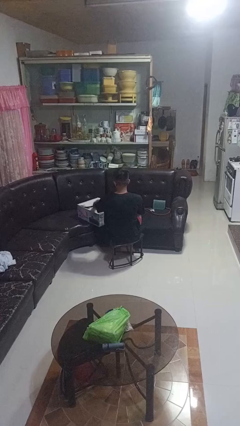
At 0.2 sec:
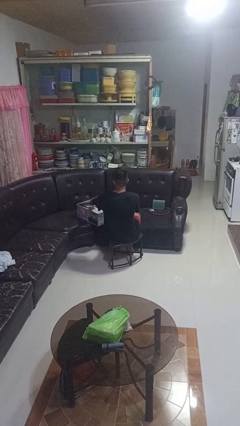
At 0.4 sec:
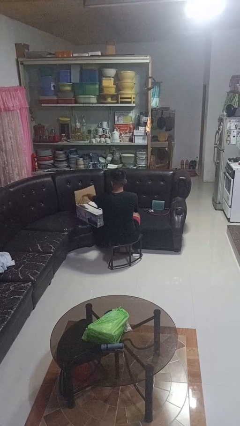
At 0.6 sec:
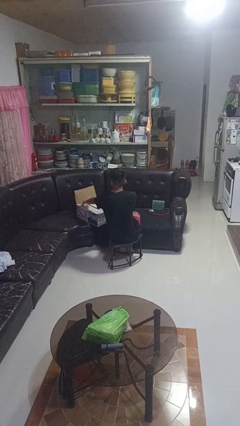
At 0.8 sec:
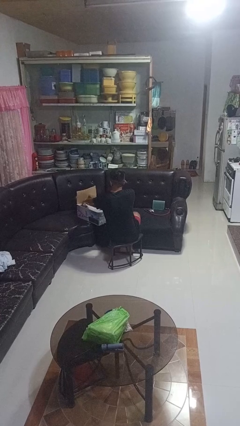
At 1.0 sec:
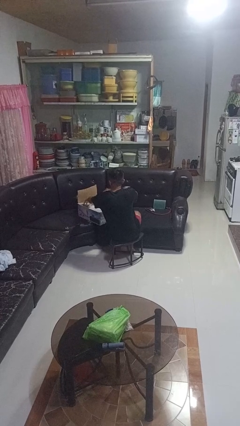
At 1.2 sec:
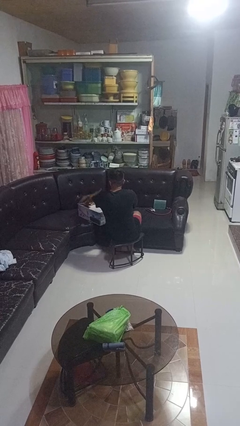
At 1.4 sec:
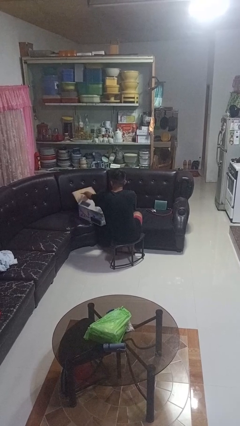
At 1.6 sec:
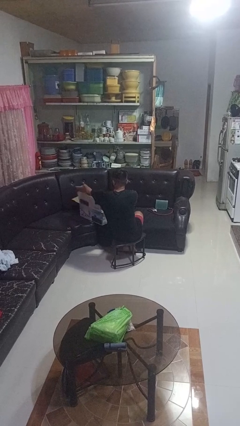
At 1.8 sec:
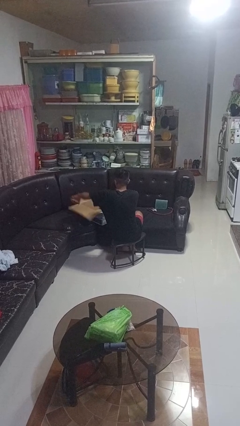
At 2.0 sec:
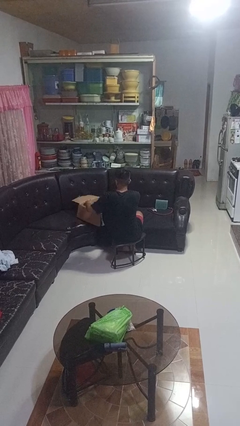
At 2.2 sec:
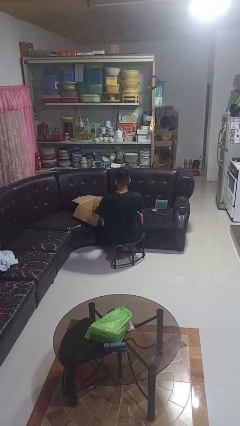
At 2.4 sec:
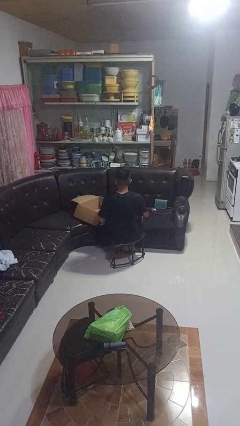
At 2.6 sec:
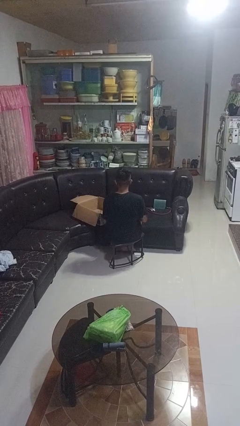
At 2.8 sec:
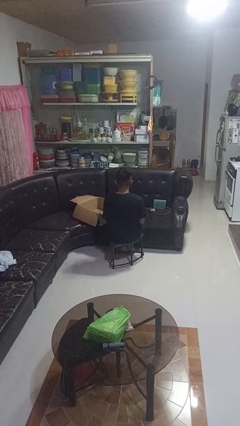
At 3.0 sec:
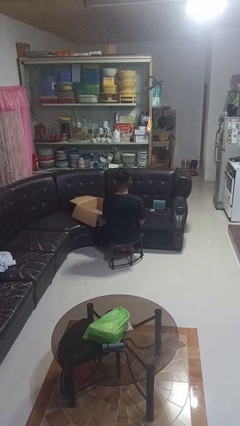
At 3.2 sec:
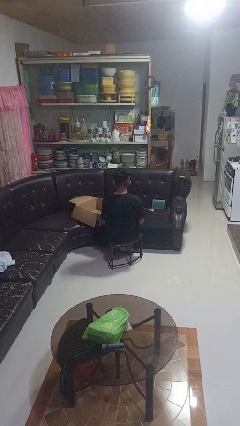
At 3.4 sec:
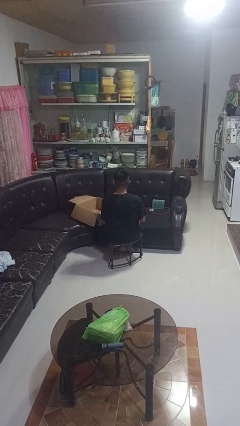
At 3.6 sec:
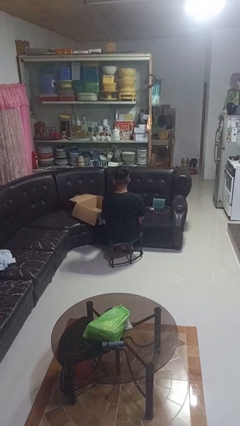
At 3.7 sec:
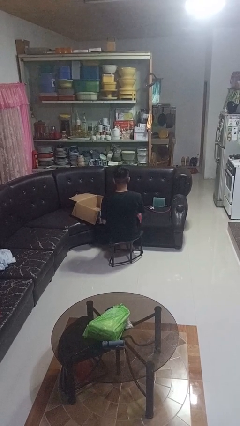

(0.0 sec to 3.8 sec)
person opens box

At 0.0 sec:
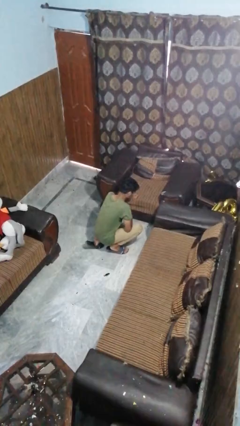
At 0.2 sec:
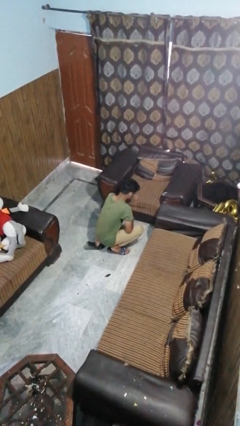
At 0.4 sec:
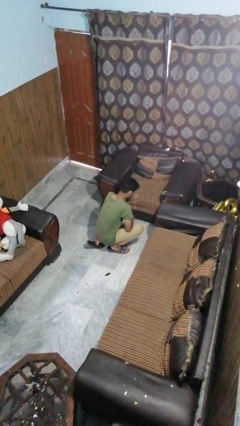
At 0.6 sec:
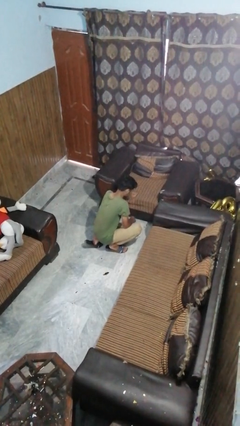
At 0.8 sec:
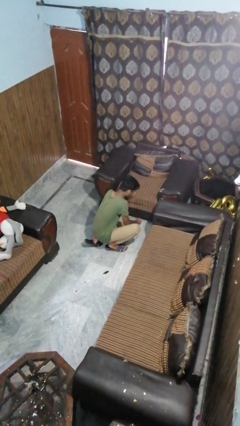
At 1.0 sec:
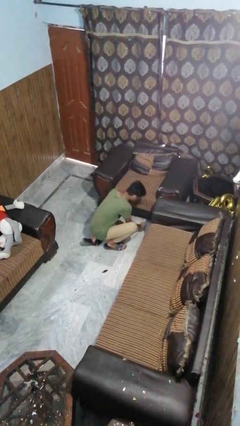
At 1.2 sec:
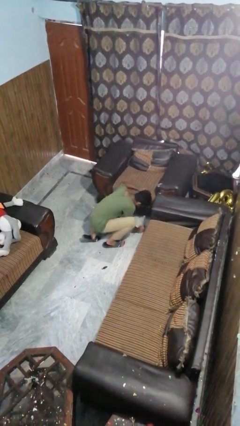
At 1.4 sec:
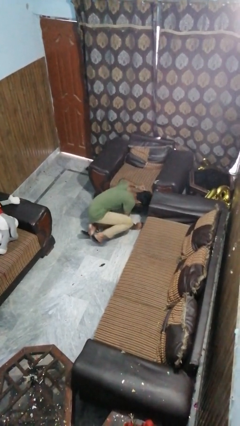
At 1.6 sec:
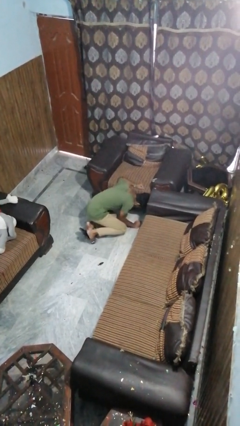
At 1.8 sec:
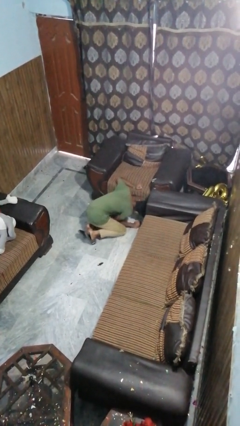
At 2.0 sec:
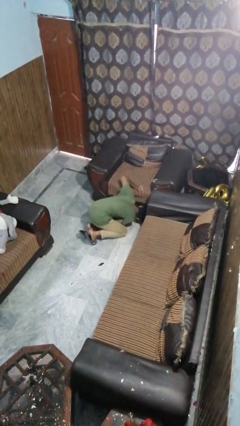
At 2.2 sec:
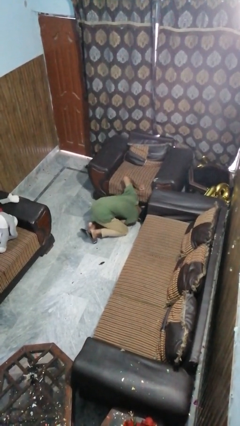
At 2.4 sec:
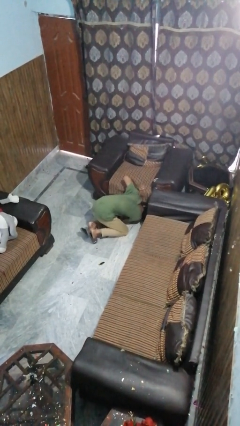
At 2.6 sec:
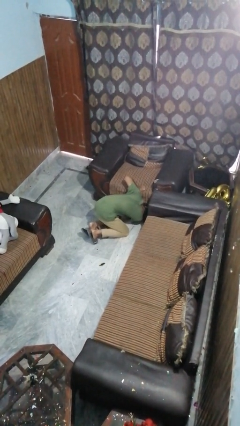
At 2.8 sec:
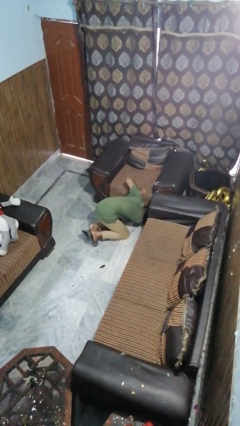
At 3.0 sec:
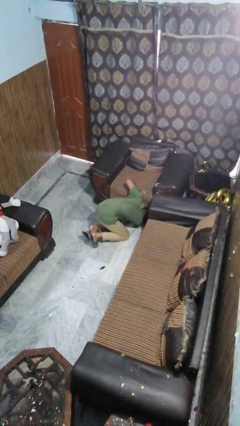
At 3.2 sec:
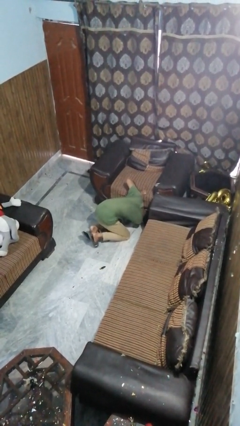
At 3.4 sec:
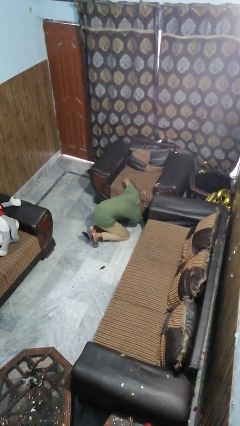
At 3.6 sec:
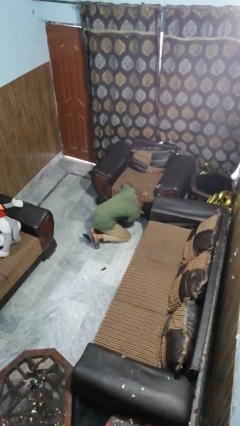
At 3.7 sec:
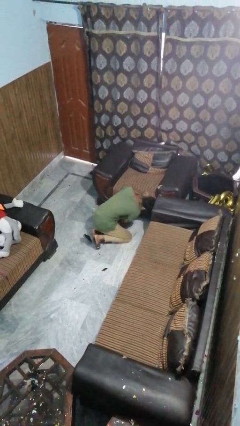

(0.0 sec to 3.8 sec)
person searches under couch

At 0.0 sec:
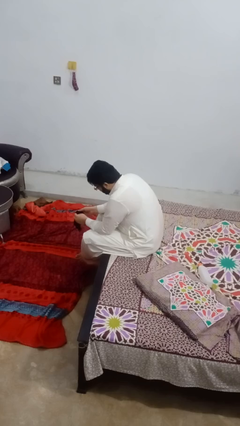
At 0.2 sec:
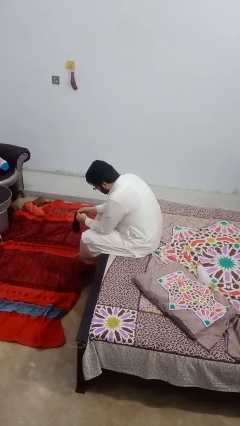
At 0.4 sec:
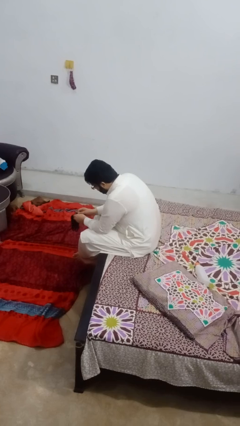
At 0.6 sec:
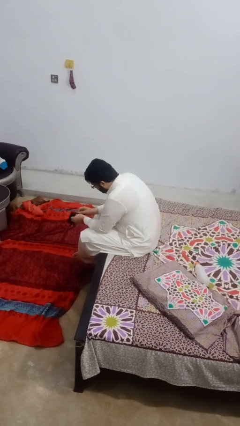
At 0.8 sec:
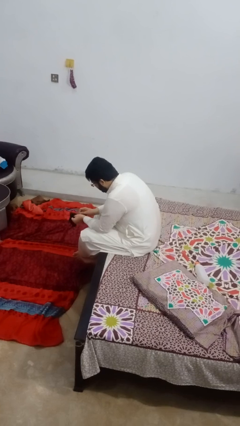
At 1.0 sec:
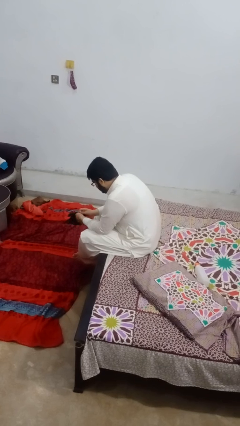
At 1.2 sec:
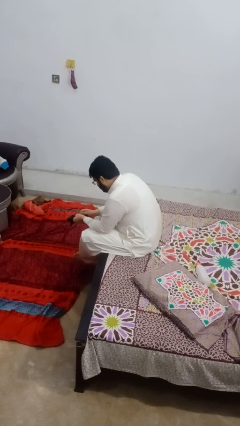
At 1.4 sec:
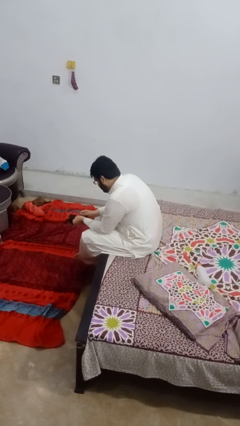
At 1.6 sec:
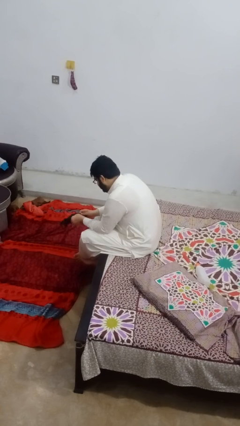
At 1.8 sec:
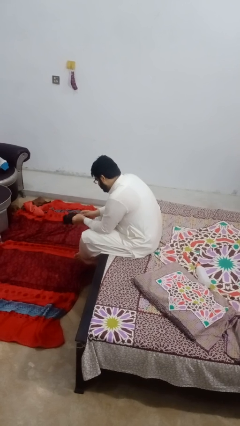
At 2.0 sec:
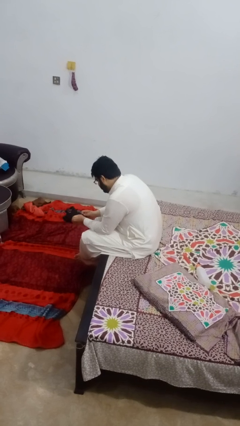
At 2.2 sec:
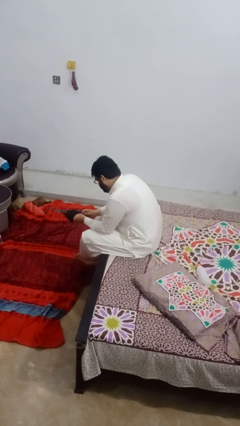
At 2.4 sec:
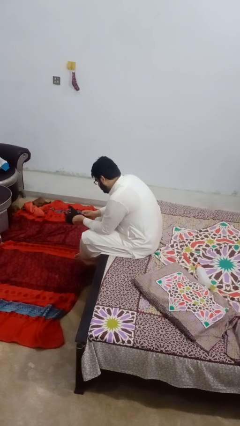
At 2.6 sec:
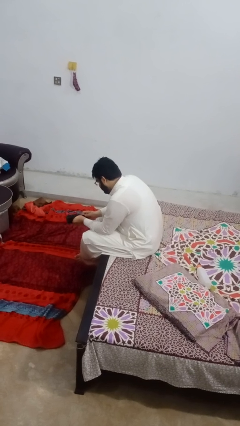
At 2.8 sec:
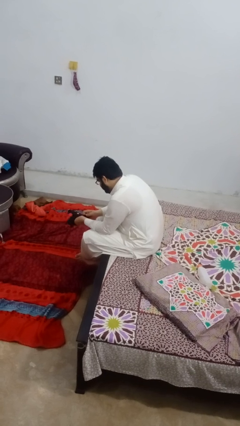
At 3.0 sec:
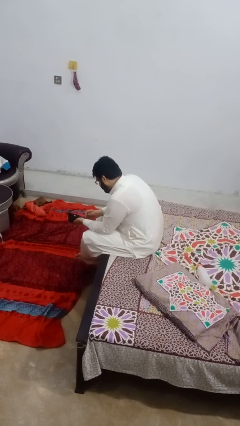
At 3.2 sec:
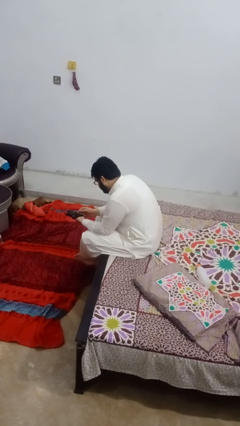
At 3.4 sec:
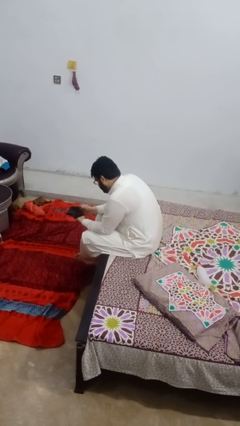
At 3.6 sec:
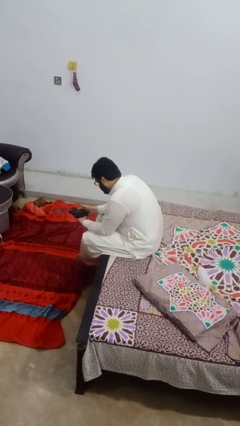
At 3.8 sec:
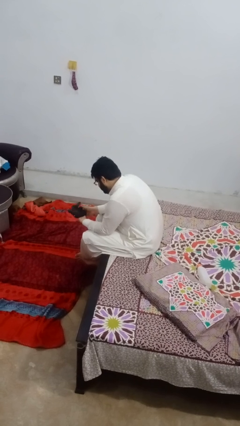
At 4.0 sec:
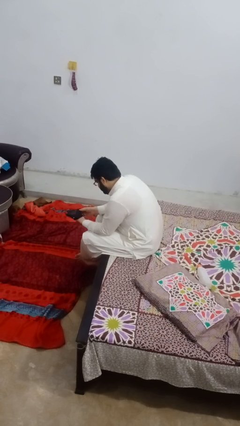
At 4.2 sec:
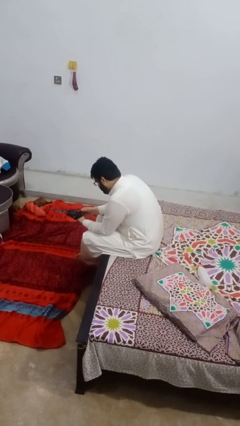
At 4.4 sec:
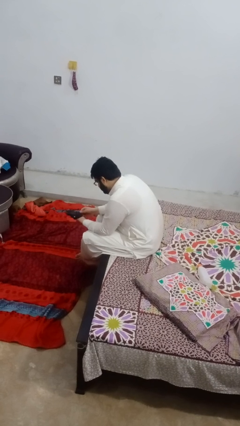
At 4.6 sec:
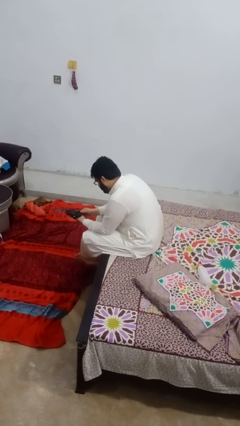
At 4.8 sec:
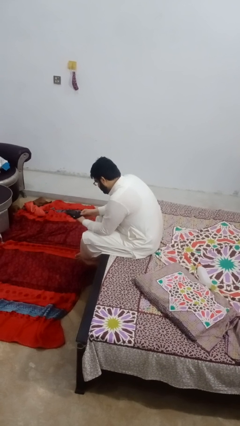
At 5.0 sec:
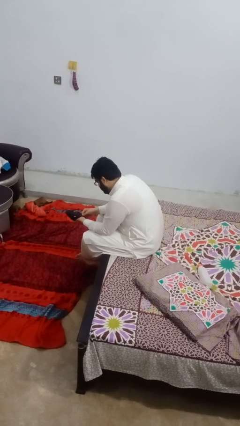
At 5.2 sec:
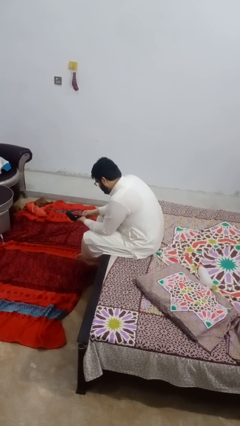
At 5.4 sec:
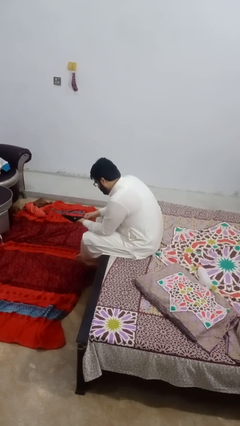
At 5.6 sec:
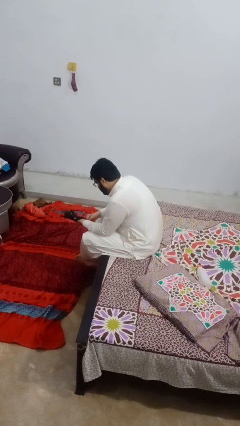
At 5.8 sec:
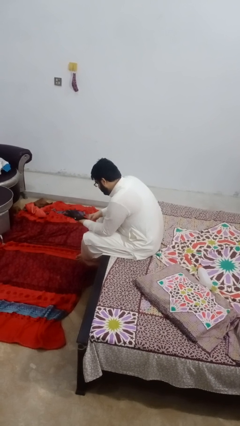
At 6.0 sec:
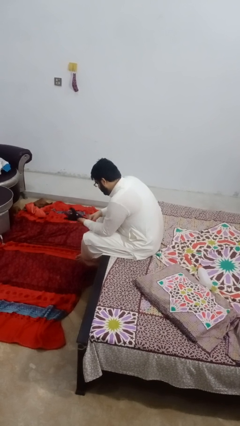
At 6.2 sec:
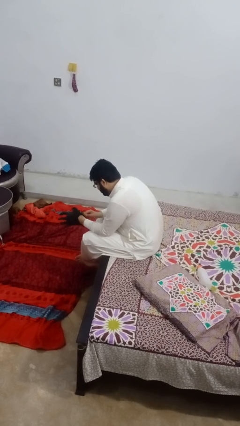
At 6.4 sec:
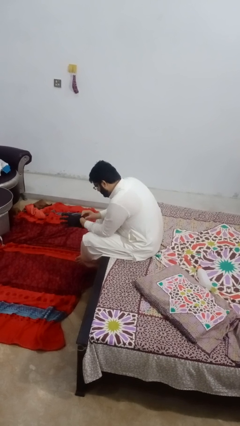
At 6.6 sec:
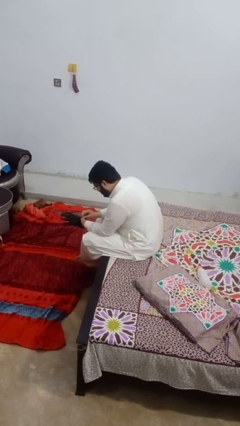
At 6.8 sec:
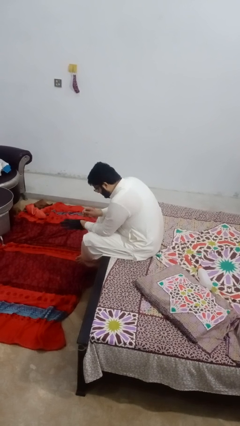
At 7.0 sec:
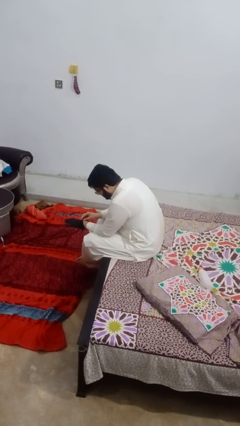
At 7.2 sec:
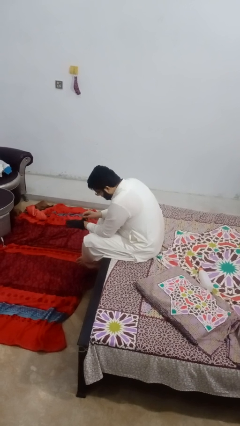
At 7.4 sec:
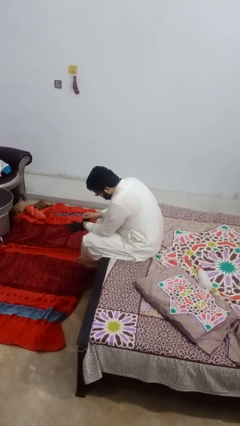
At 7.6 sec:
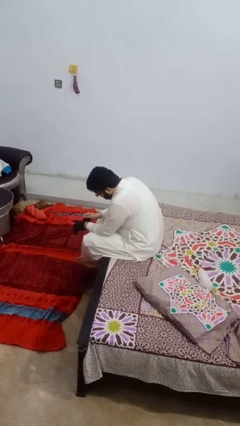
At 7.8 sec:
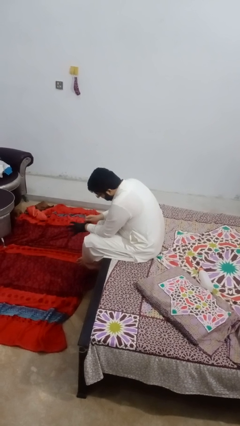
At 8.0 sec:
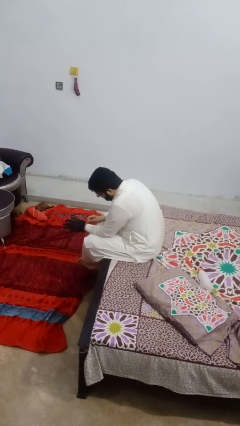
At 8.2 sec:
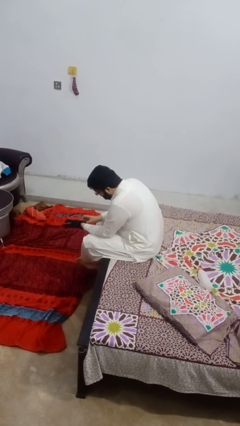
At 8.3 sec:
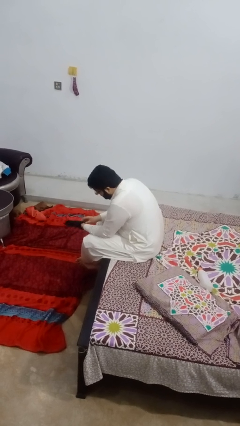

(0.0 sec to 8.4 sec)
person puts on gloves

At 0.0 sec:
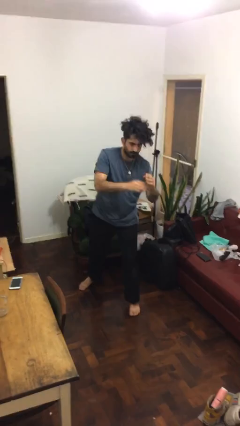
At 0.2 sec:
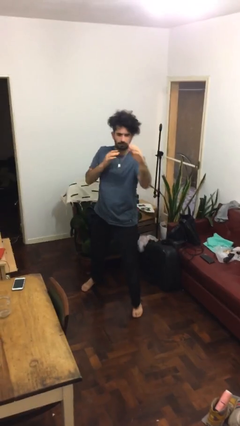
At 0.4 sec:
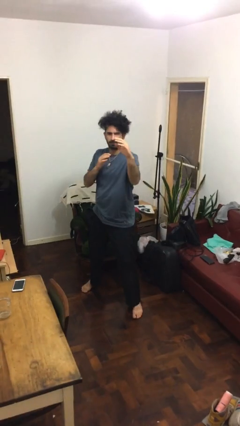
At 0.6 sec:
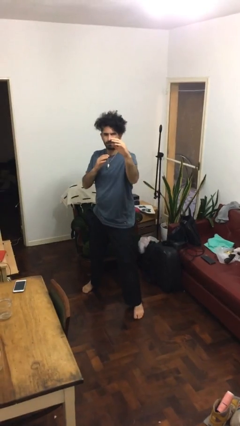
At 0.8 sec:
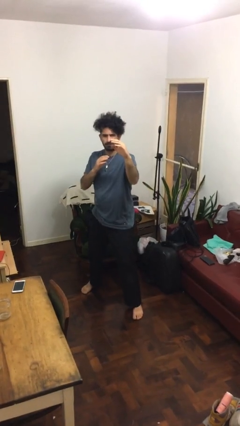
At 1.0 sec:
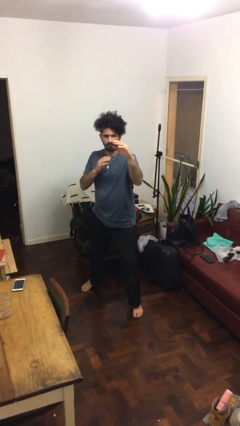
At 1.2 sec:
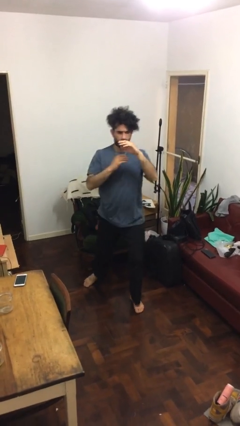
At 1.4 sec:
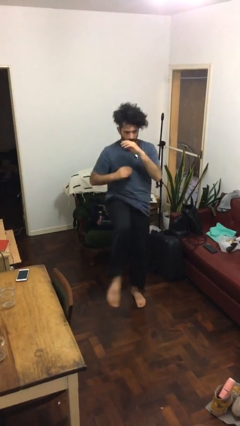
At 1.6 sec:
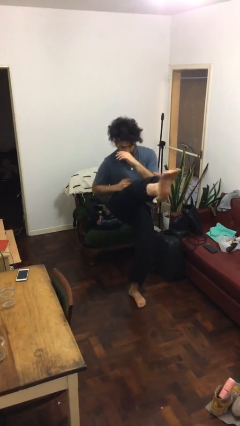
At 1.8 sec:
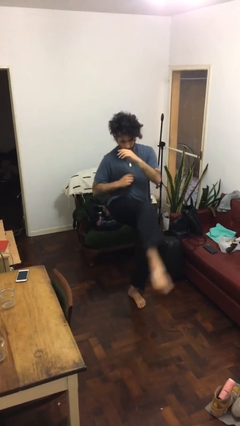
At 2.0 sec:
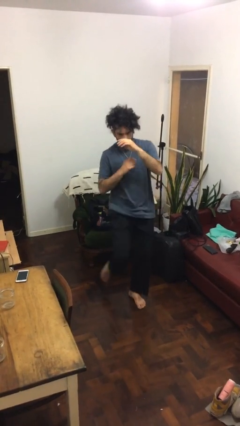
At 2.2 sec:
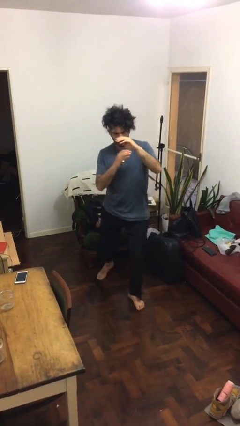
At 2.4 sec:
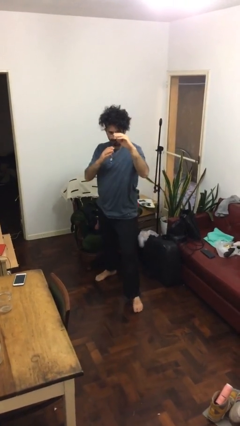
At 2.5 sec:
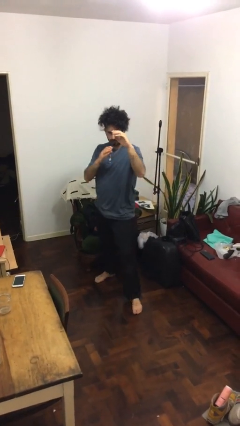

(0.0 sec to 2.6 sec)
person karate kicks
